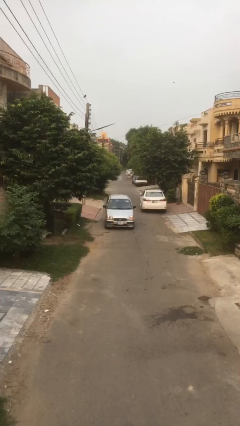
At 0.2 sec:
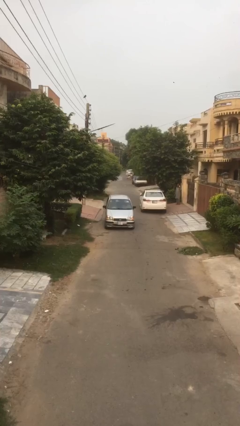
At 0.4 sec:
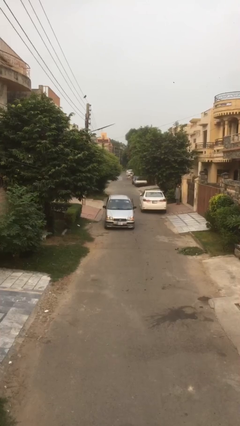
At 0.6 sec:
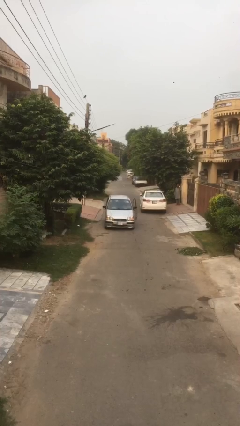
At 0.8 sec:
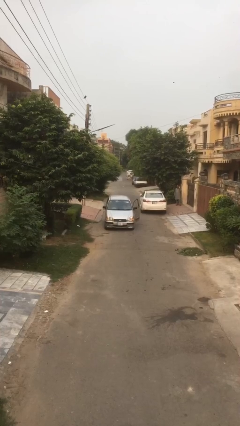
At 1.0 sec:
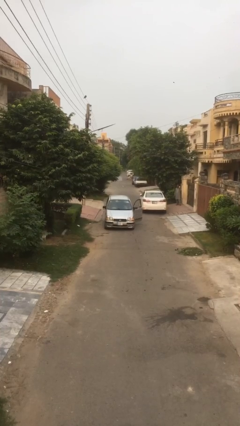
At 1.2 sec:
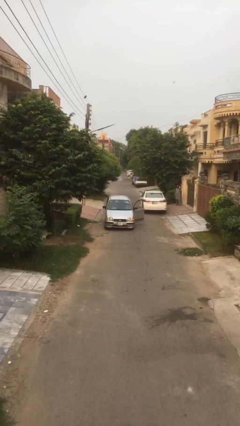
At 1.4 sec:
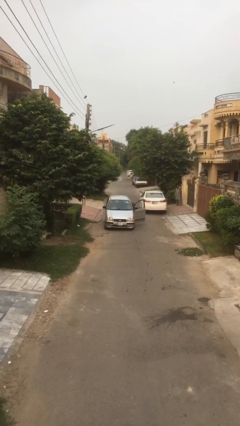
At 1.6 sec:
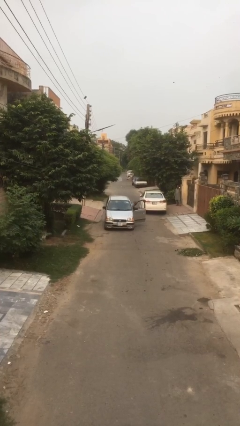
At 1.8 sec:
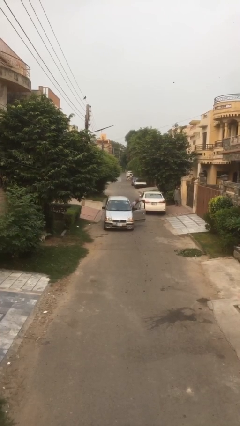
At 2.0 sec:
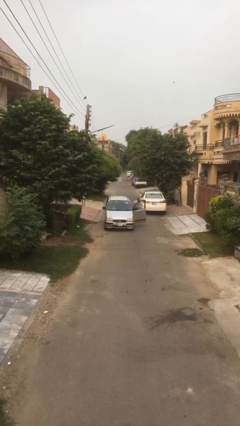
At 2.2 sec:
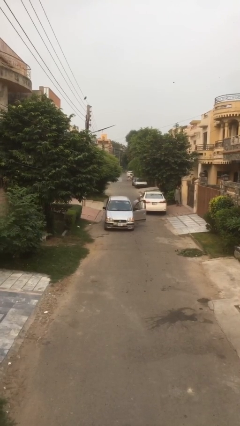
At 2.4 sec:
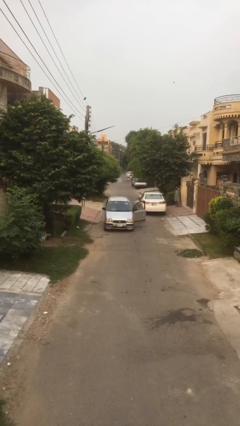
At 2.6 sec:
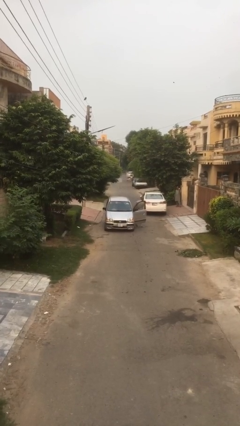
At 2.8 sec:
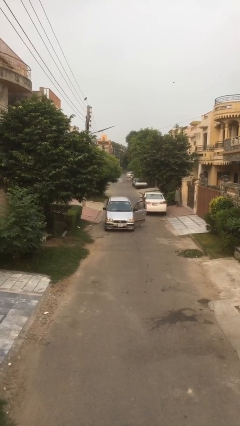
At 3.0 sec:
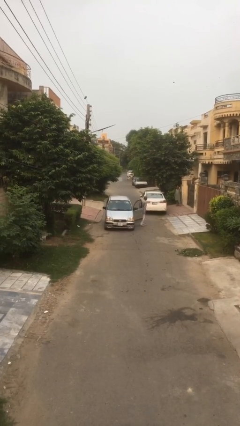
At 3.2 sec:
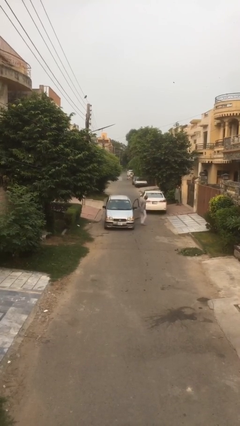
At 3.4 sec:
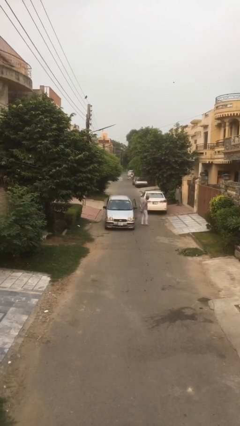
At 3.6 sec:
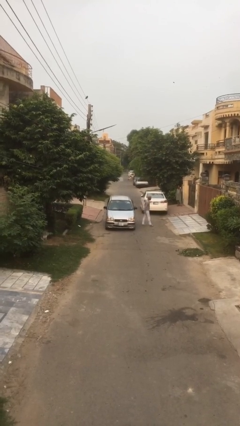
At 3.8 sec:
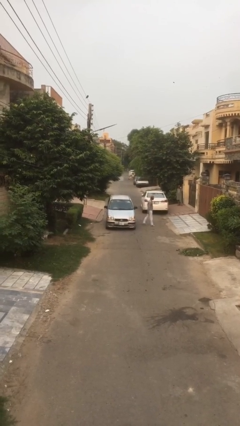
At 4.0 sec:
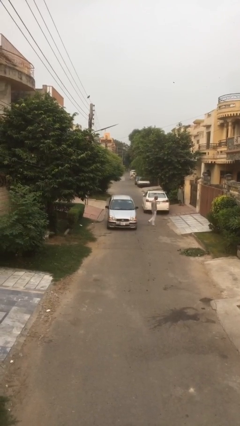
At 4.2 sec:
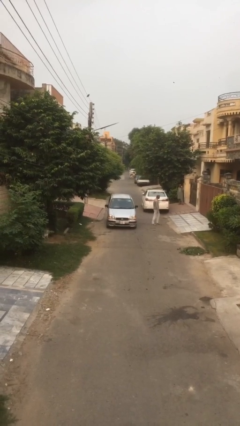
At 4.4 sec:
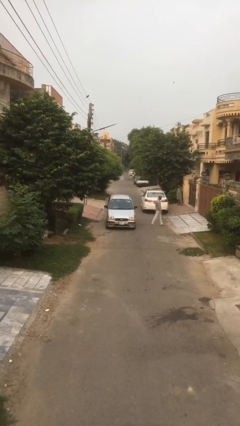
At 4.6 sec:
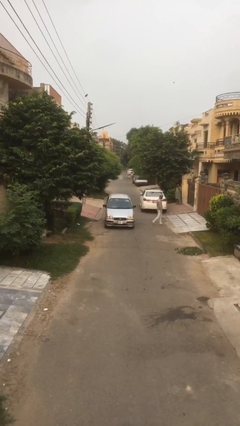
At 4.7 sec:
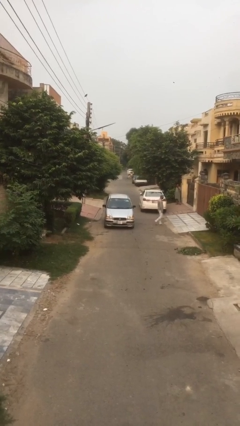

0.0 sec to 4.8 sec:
car drops off person

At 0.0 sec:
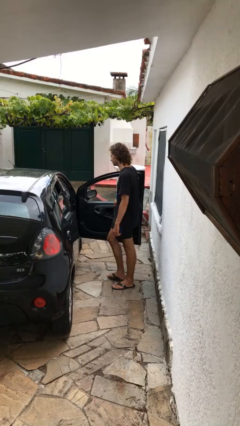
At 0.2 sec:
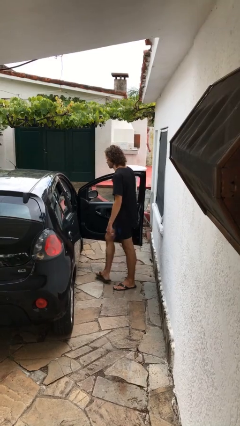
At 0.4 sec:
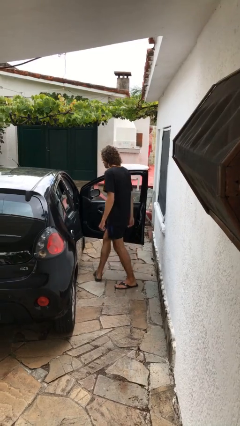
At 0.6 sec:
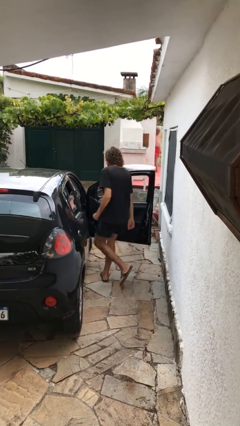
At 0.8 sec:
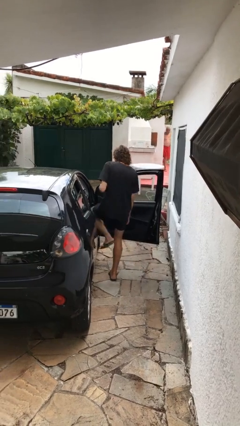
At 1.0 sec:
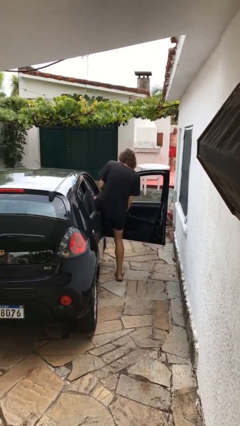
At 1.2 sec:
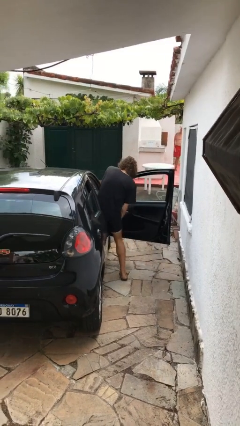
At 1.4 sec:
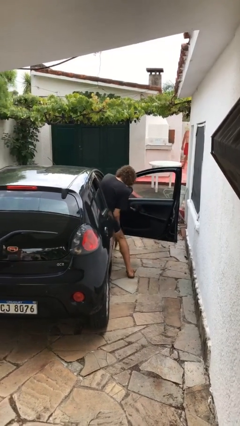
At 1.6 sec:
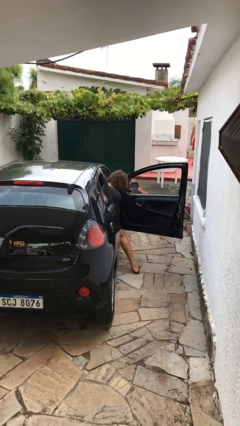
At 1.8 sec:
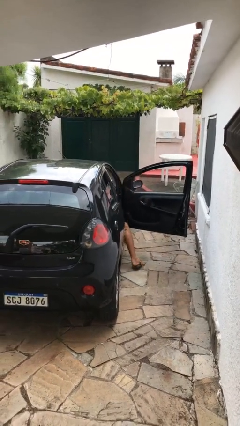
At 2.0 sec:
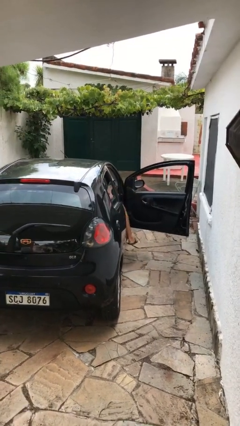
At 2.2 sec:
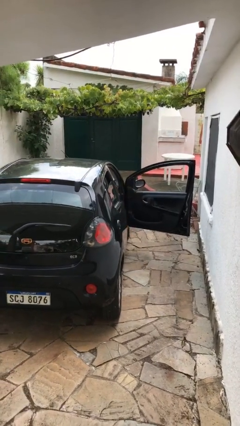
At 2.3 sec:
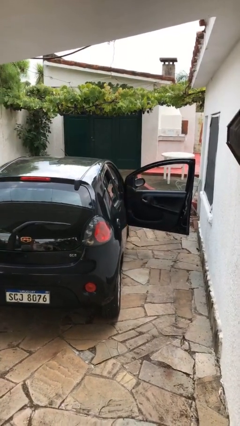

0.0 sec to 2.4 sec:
person enters car

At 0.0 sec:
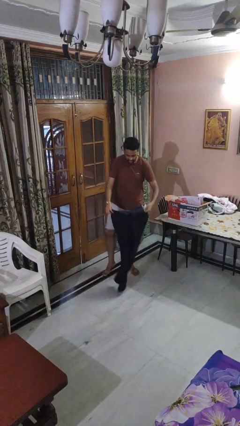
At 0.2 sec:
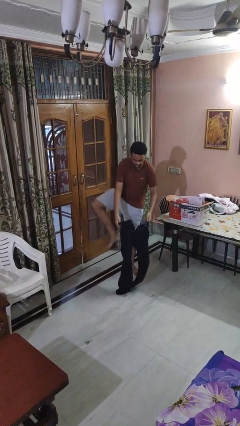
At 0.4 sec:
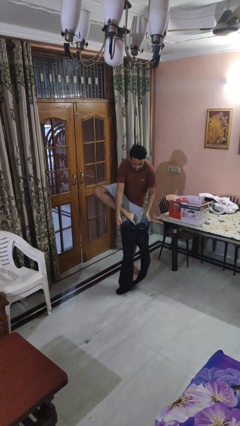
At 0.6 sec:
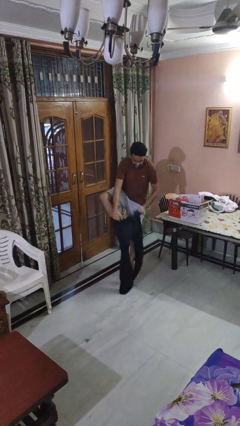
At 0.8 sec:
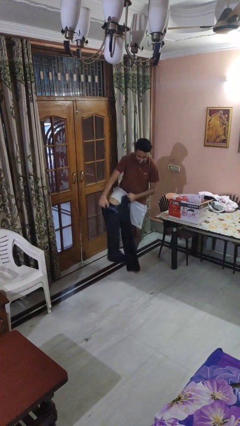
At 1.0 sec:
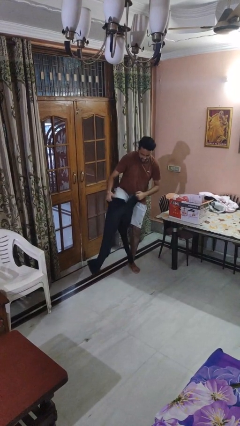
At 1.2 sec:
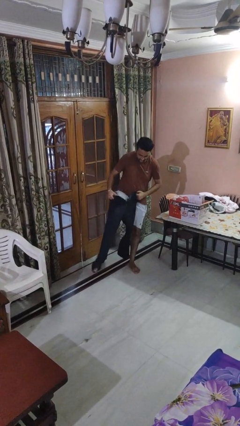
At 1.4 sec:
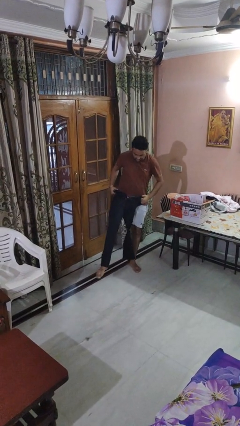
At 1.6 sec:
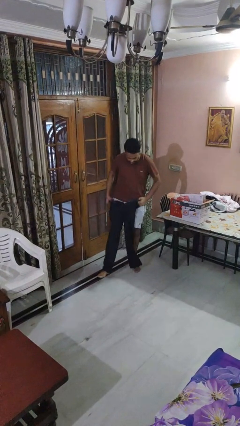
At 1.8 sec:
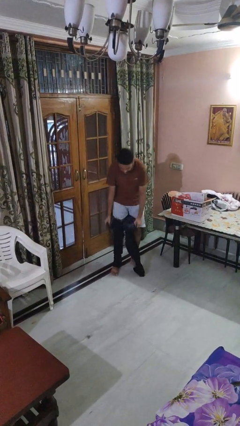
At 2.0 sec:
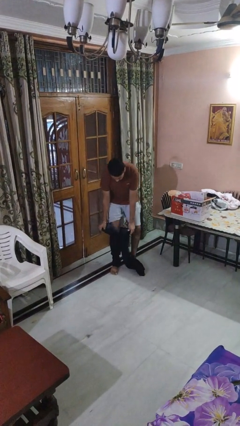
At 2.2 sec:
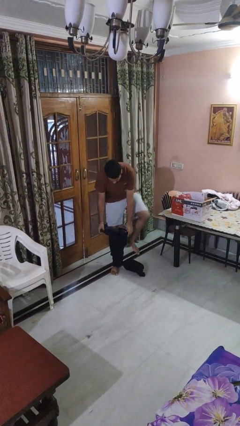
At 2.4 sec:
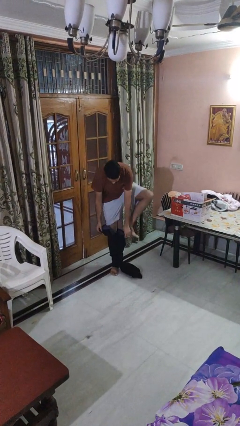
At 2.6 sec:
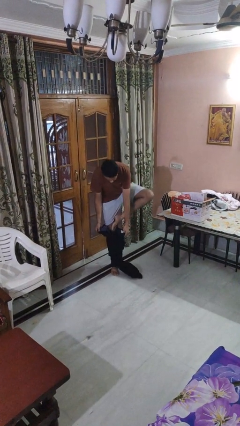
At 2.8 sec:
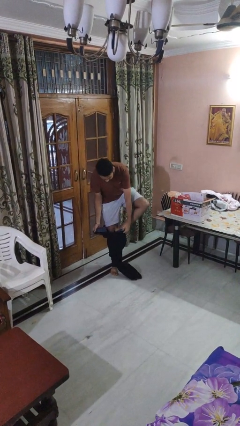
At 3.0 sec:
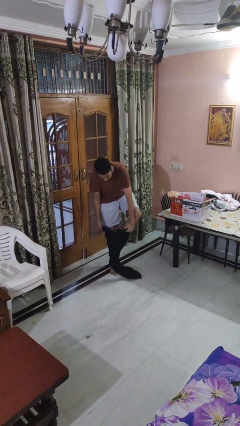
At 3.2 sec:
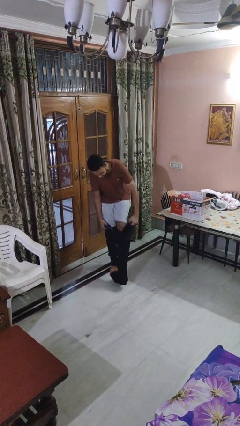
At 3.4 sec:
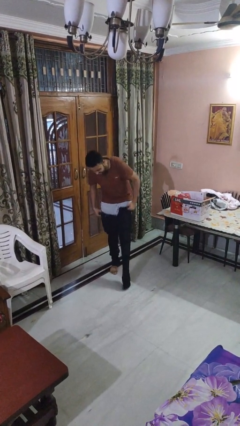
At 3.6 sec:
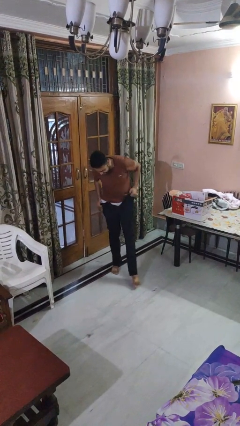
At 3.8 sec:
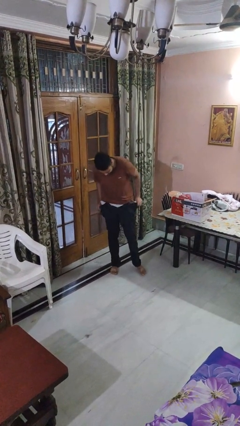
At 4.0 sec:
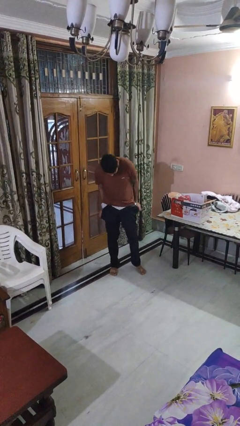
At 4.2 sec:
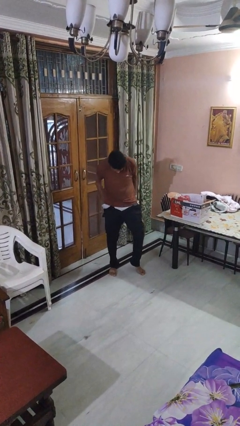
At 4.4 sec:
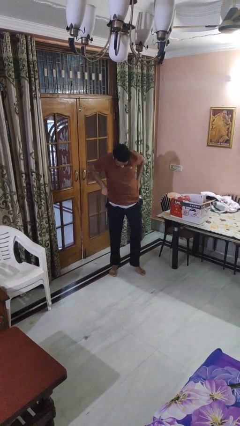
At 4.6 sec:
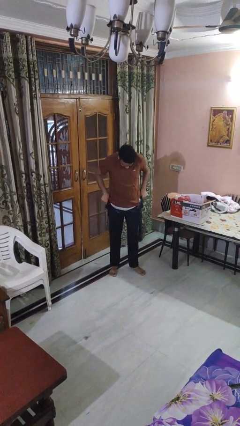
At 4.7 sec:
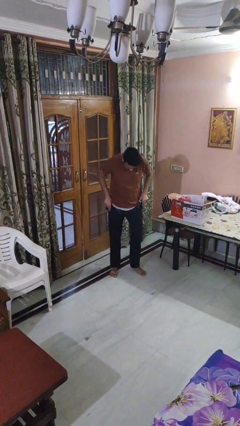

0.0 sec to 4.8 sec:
person puts on pants

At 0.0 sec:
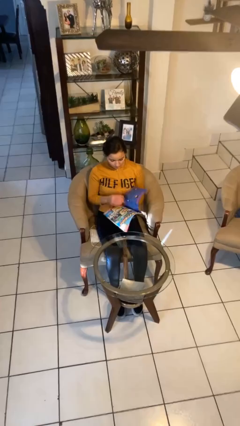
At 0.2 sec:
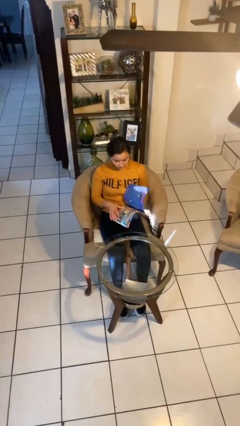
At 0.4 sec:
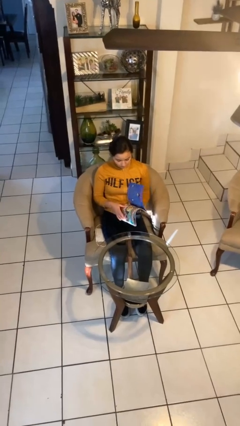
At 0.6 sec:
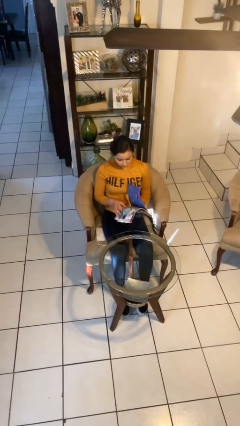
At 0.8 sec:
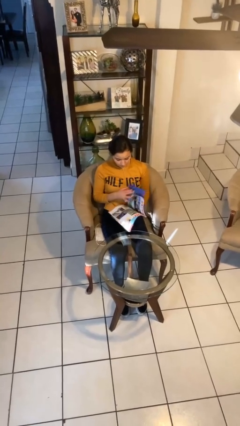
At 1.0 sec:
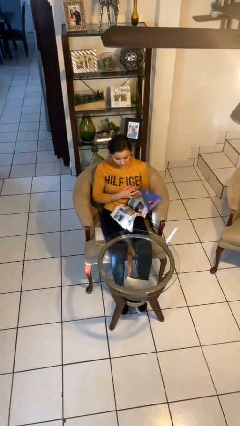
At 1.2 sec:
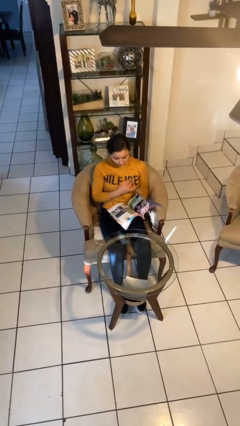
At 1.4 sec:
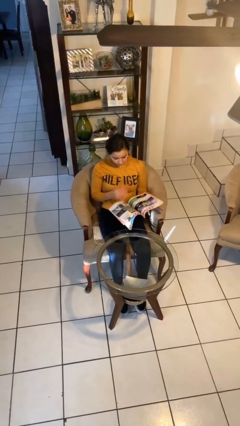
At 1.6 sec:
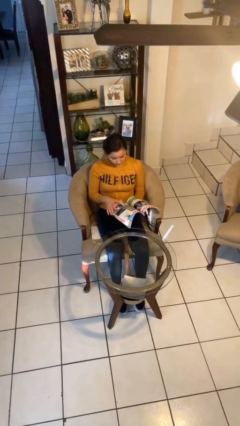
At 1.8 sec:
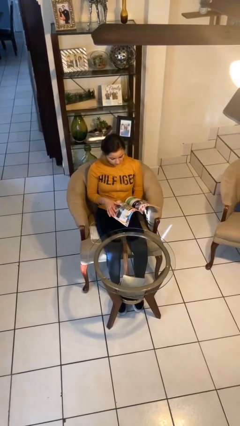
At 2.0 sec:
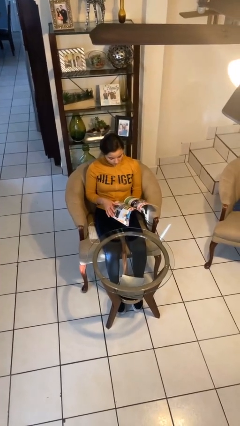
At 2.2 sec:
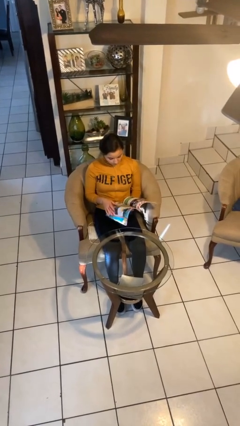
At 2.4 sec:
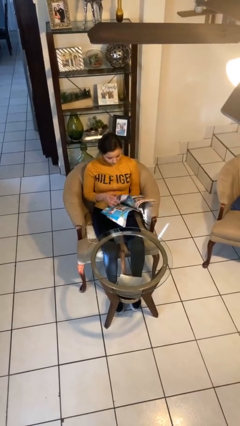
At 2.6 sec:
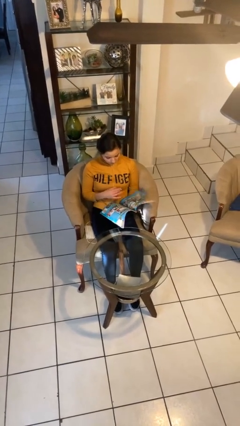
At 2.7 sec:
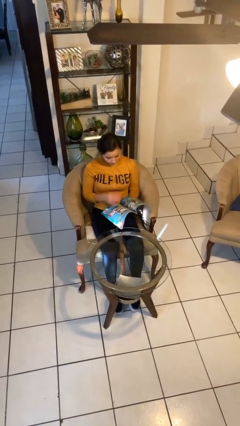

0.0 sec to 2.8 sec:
person reads magazine

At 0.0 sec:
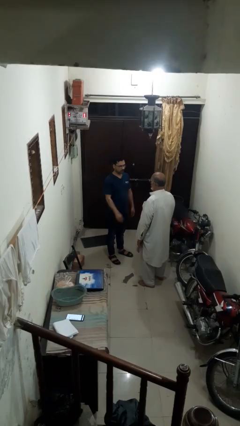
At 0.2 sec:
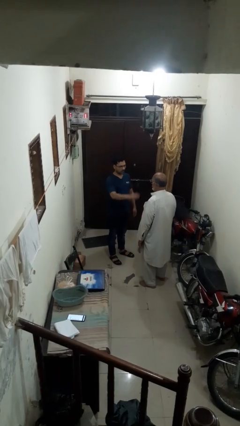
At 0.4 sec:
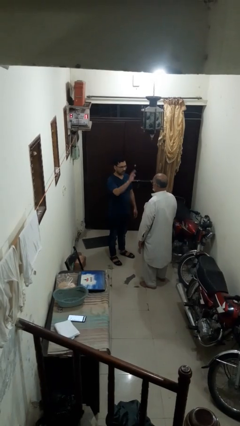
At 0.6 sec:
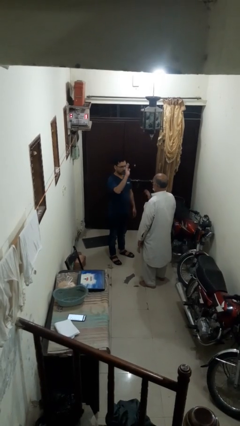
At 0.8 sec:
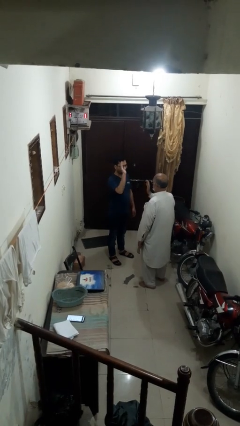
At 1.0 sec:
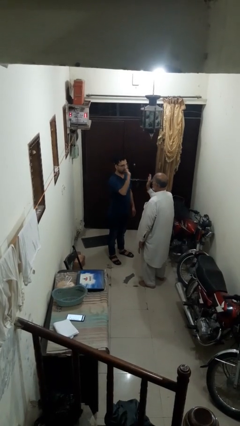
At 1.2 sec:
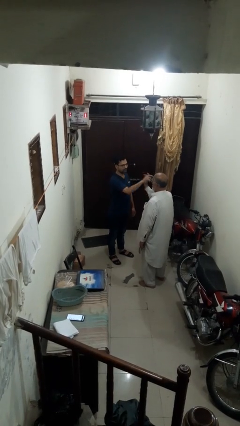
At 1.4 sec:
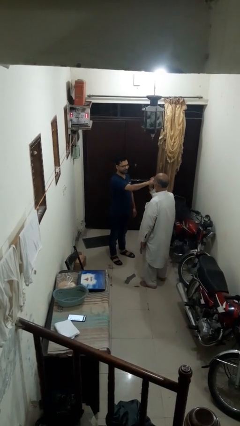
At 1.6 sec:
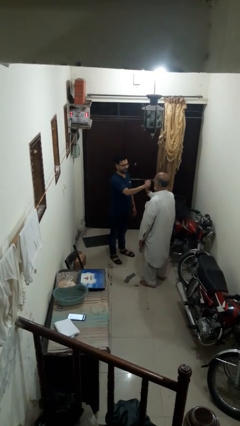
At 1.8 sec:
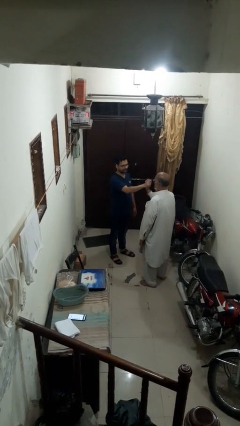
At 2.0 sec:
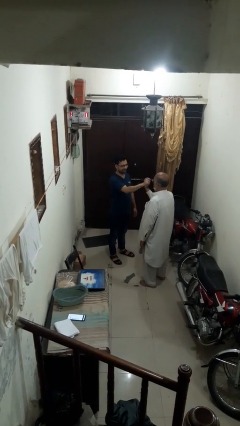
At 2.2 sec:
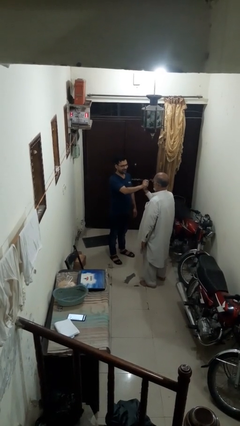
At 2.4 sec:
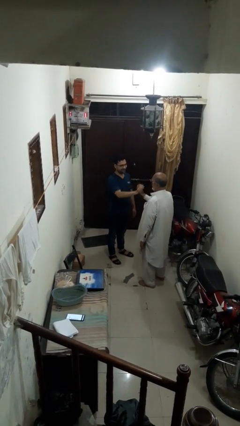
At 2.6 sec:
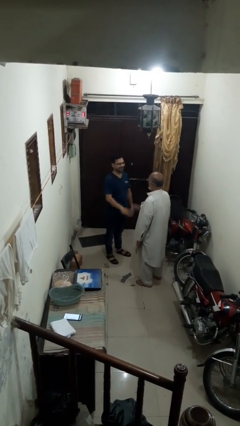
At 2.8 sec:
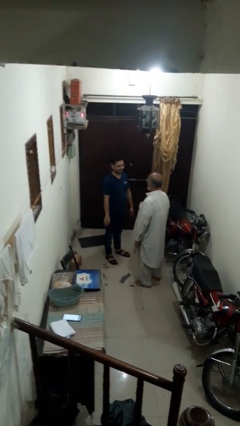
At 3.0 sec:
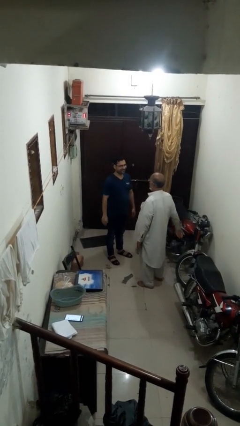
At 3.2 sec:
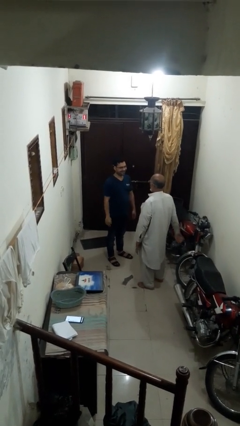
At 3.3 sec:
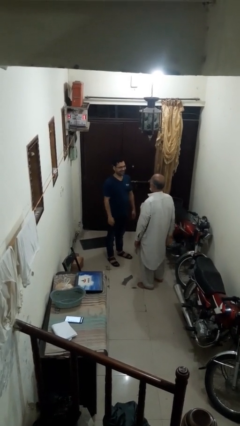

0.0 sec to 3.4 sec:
person highfives hand
